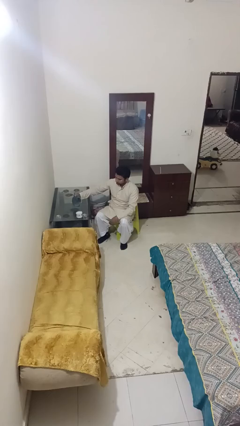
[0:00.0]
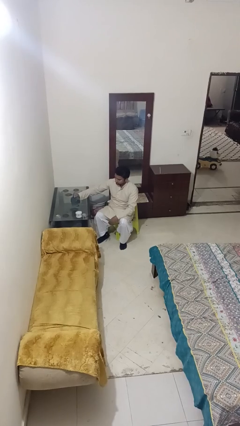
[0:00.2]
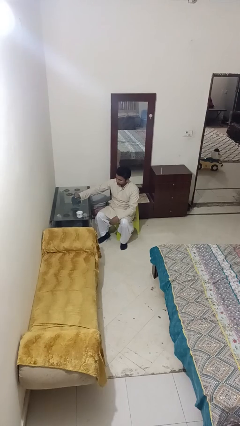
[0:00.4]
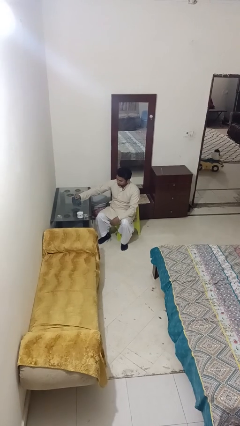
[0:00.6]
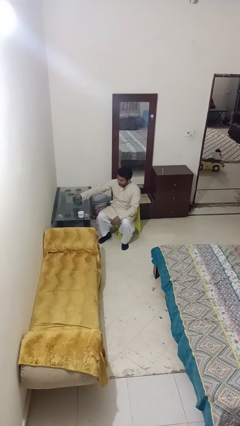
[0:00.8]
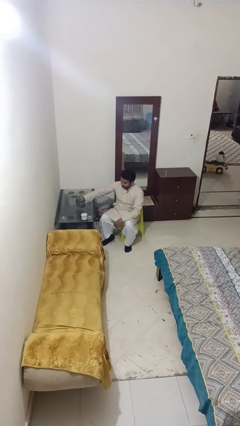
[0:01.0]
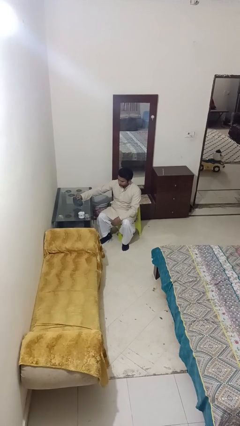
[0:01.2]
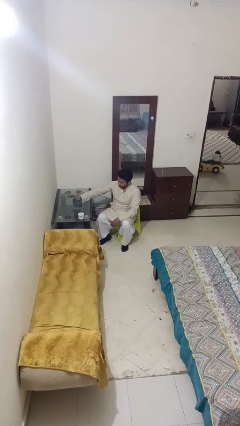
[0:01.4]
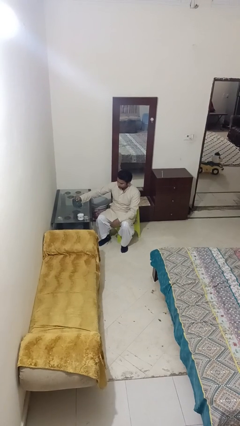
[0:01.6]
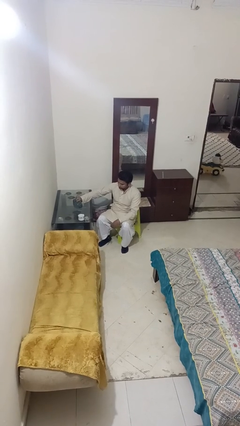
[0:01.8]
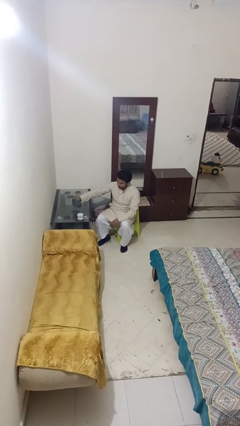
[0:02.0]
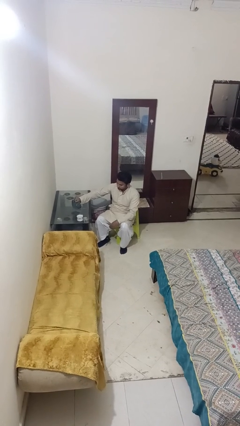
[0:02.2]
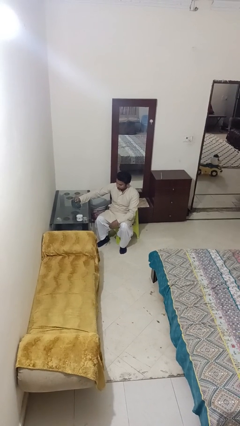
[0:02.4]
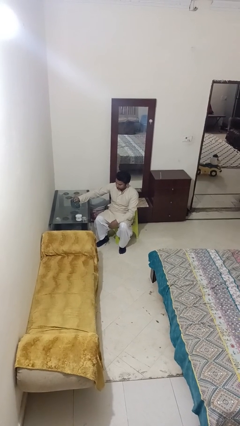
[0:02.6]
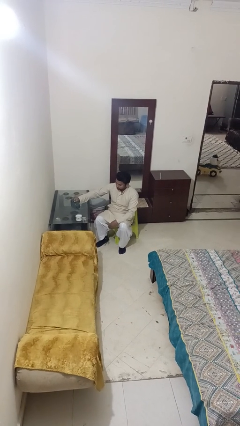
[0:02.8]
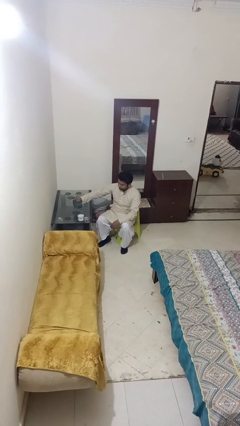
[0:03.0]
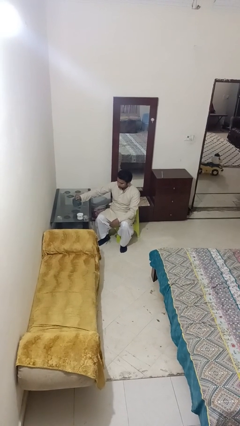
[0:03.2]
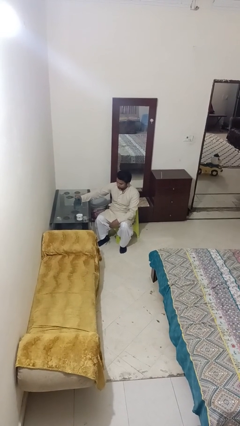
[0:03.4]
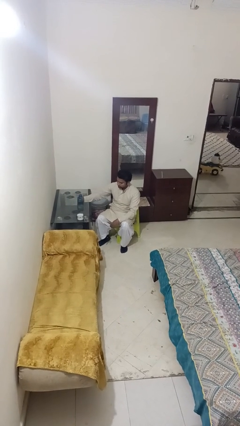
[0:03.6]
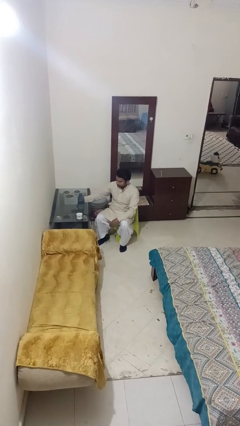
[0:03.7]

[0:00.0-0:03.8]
person pours liquid into cup

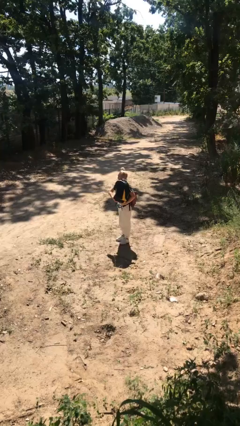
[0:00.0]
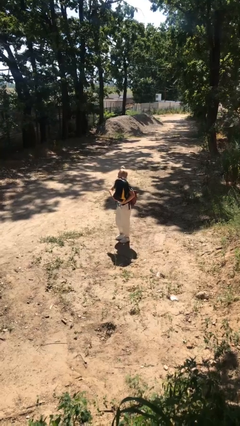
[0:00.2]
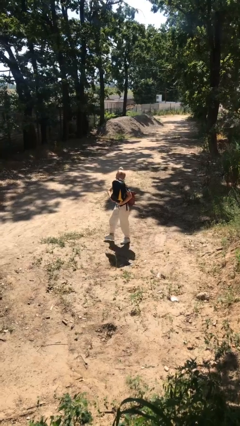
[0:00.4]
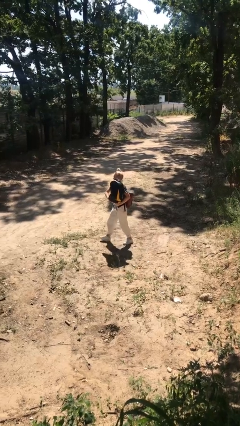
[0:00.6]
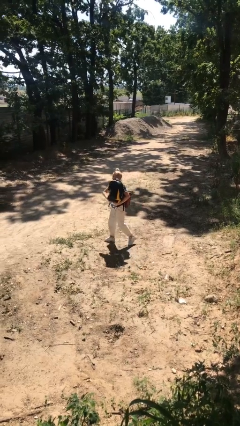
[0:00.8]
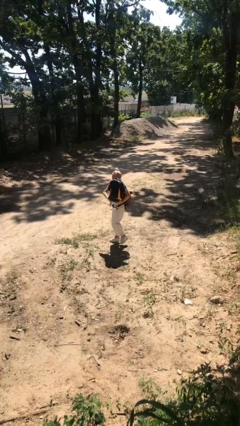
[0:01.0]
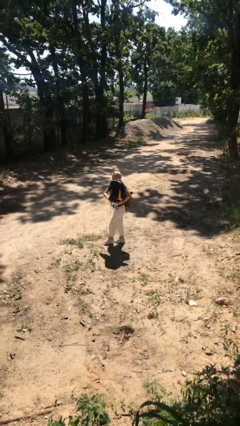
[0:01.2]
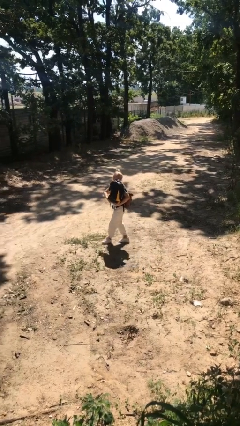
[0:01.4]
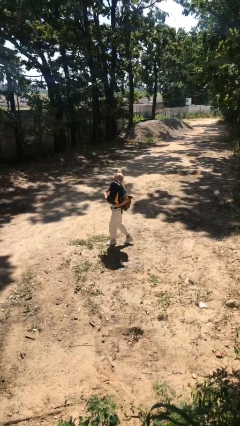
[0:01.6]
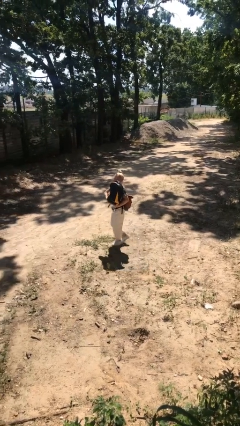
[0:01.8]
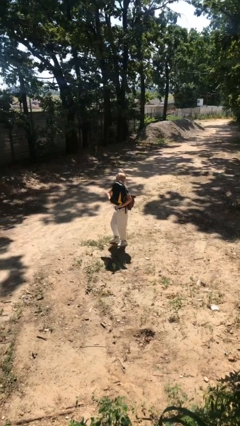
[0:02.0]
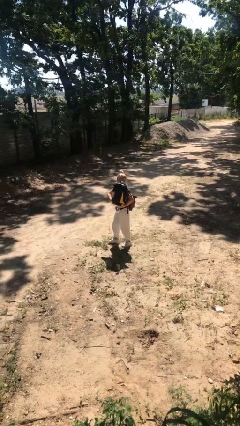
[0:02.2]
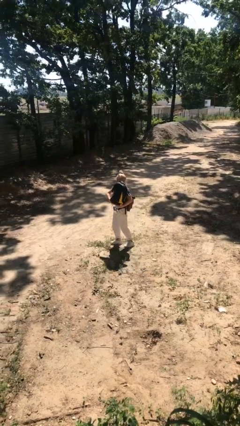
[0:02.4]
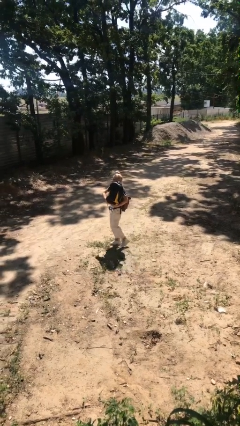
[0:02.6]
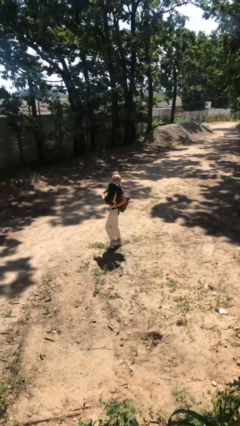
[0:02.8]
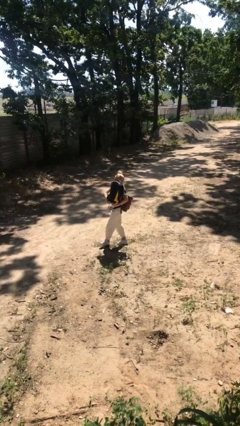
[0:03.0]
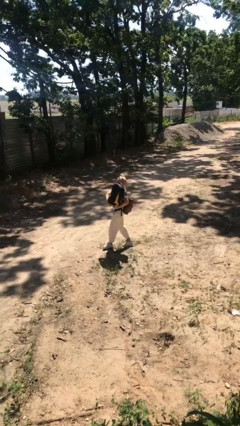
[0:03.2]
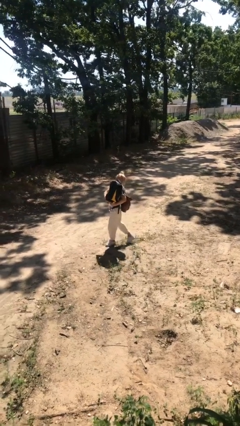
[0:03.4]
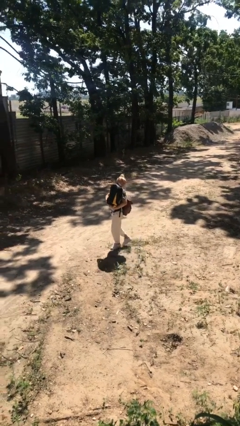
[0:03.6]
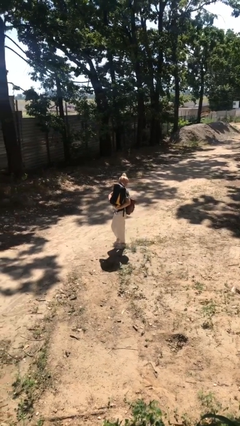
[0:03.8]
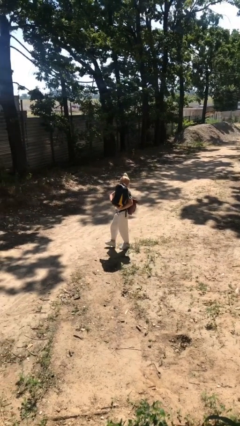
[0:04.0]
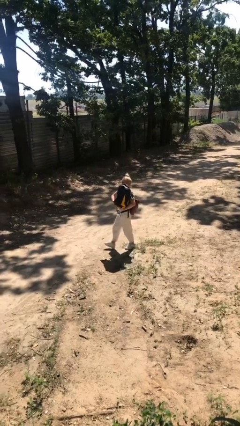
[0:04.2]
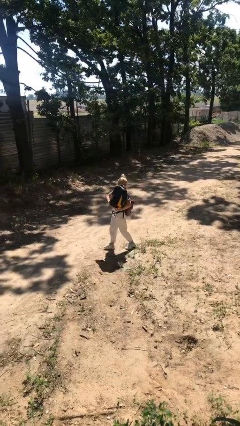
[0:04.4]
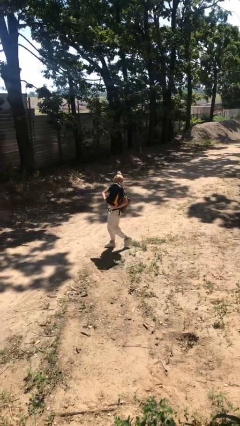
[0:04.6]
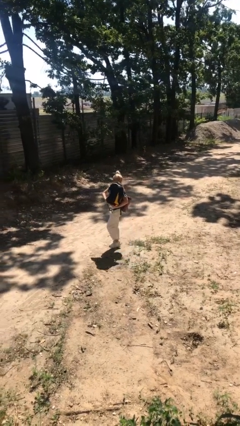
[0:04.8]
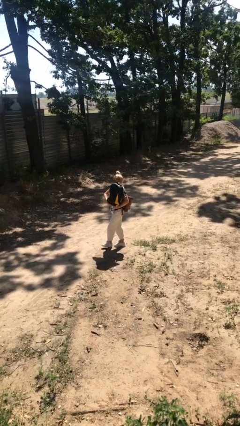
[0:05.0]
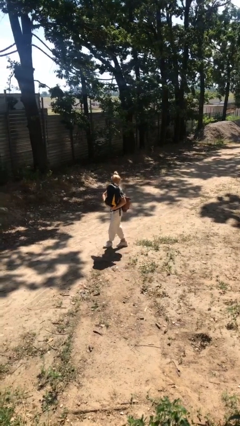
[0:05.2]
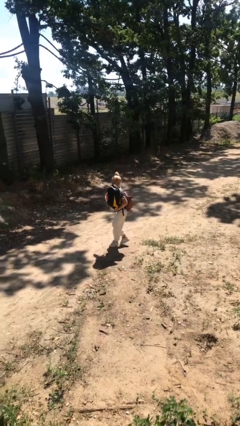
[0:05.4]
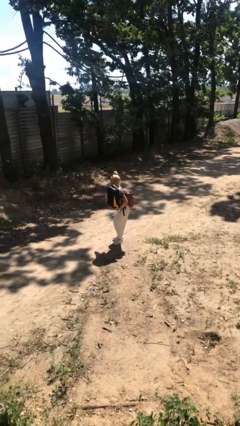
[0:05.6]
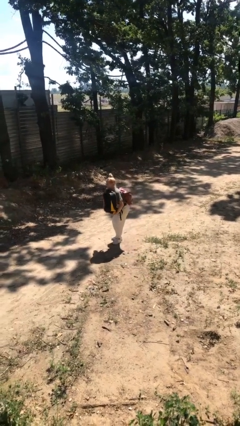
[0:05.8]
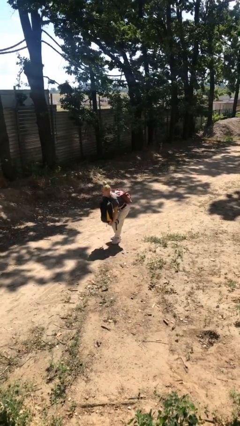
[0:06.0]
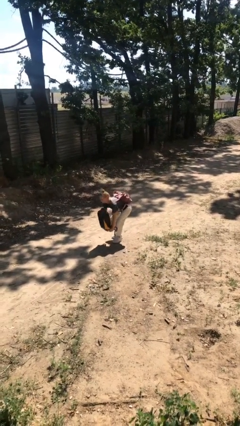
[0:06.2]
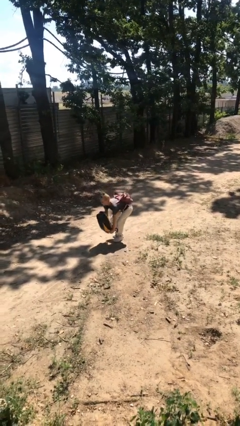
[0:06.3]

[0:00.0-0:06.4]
person carries heavy object

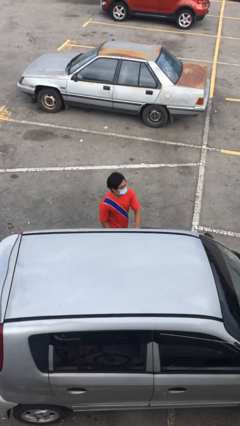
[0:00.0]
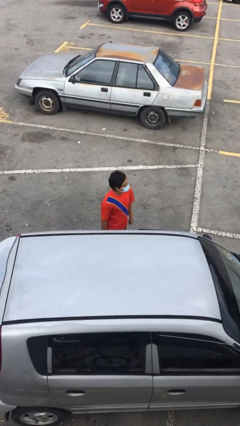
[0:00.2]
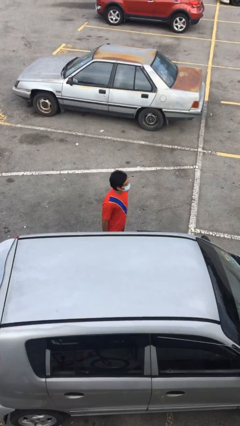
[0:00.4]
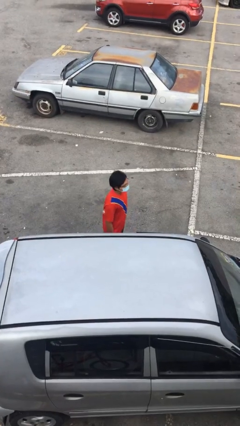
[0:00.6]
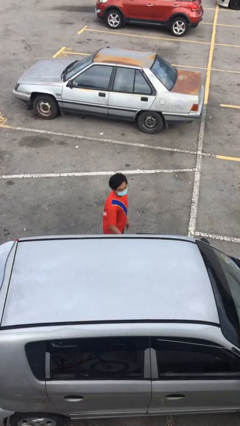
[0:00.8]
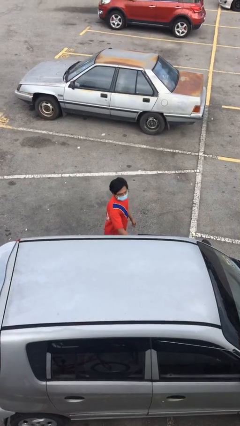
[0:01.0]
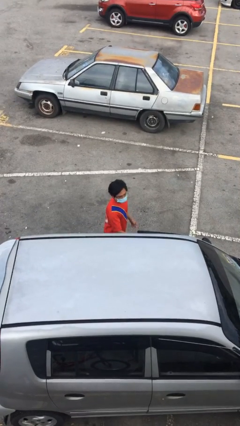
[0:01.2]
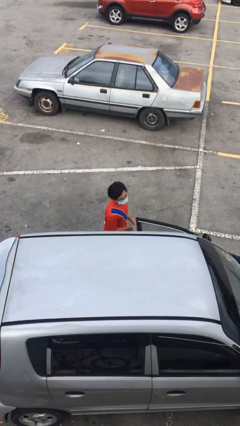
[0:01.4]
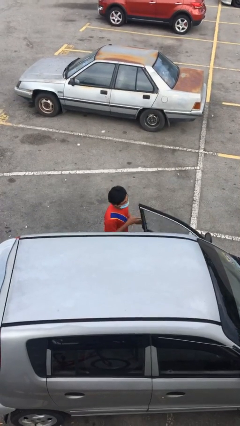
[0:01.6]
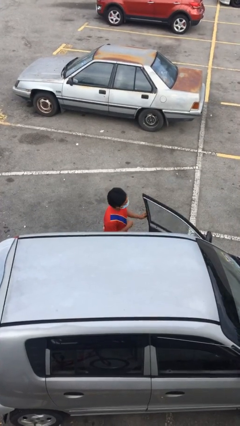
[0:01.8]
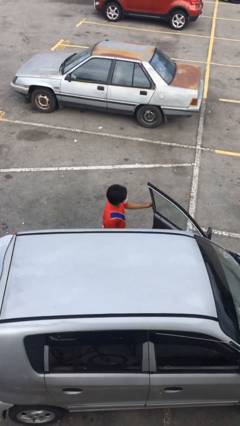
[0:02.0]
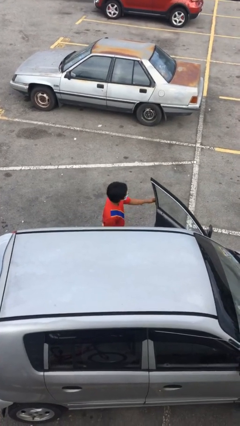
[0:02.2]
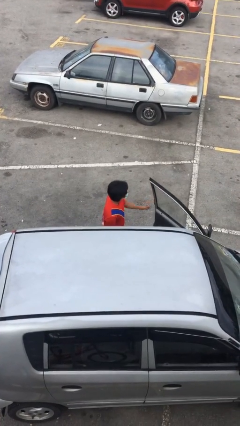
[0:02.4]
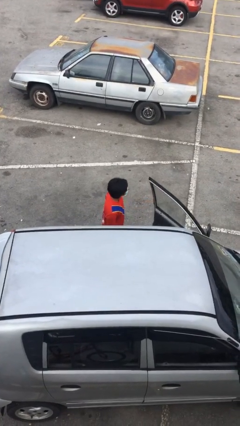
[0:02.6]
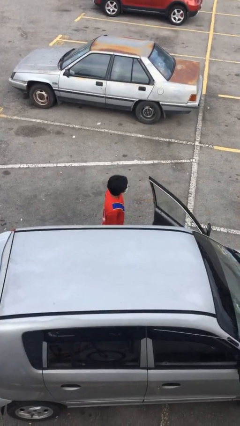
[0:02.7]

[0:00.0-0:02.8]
person opens car door

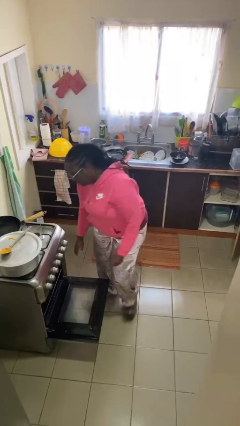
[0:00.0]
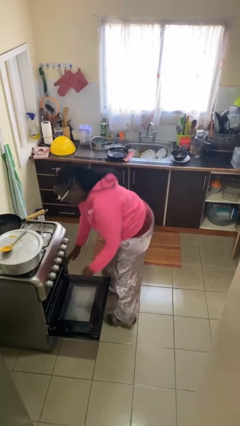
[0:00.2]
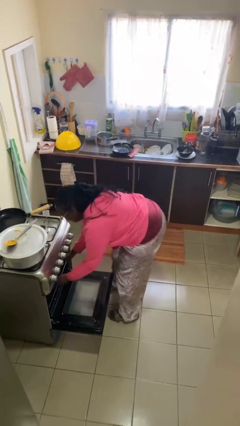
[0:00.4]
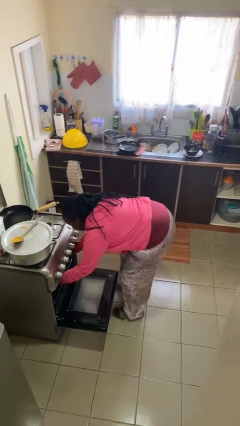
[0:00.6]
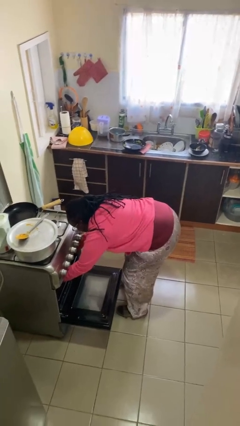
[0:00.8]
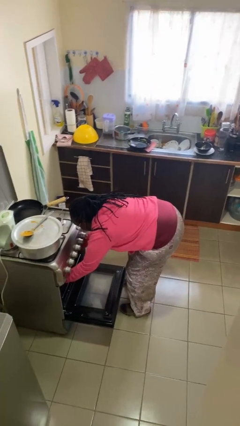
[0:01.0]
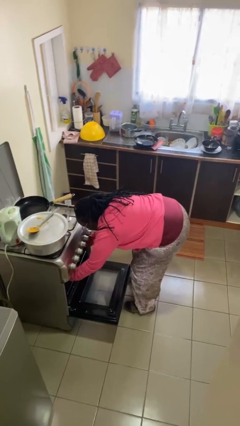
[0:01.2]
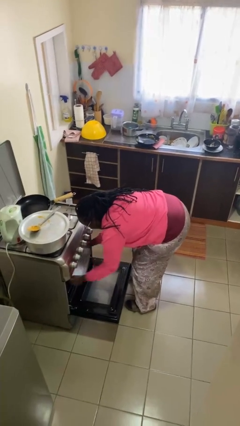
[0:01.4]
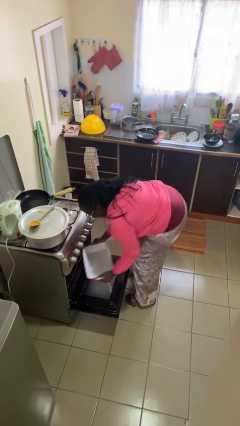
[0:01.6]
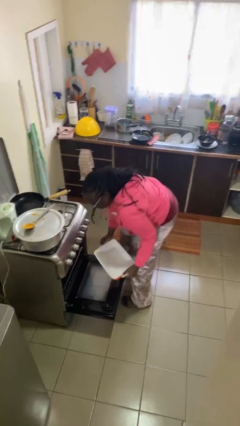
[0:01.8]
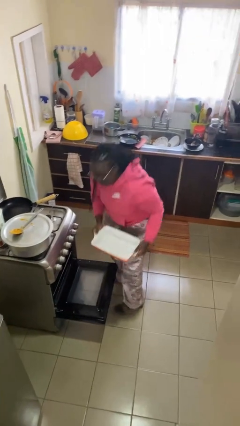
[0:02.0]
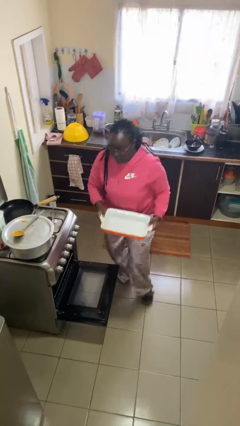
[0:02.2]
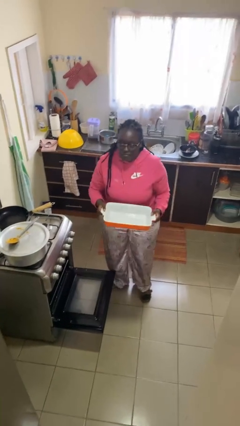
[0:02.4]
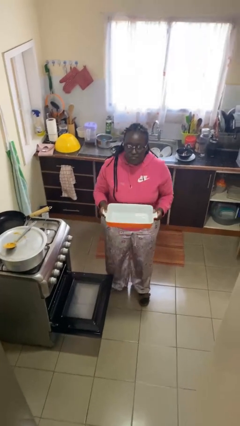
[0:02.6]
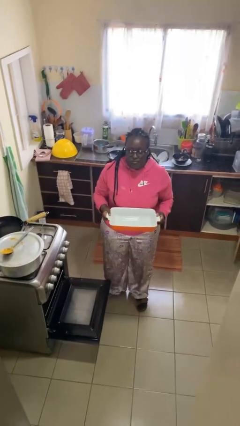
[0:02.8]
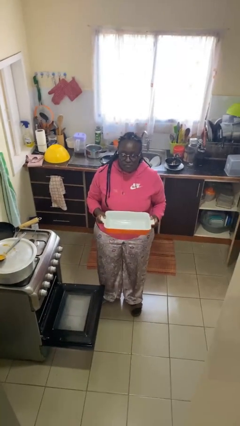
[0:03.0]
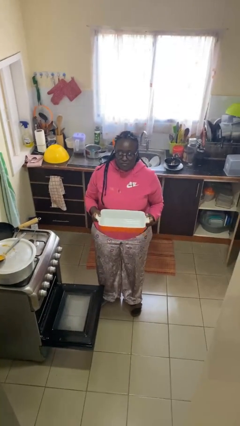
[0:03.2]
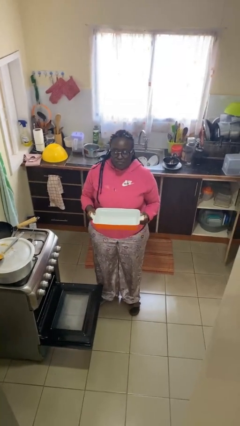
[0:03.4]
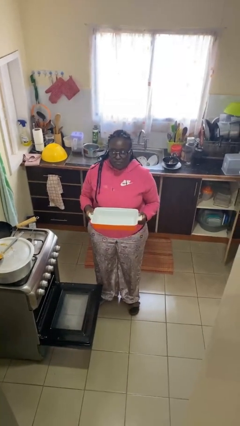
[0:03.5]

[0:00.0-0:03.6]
person takes object from oven

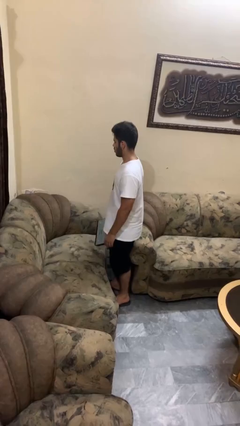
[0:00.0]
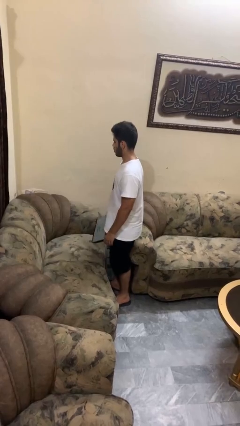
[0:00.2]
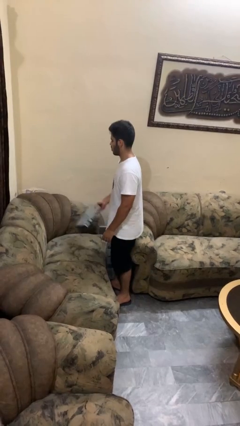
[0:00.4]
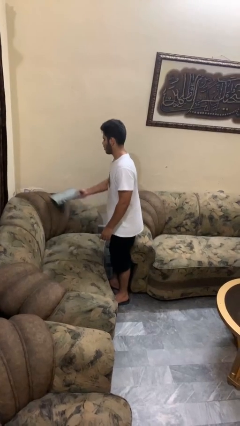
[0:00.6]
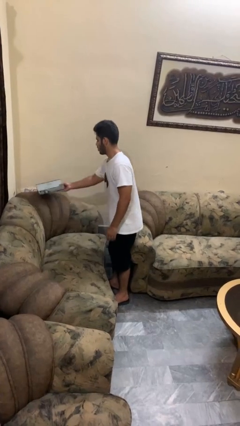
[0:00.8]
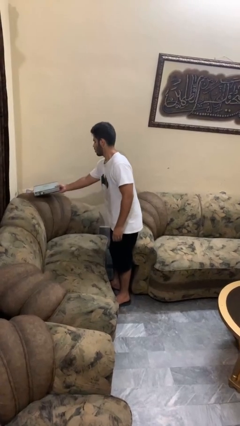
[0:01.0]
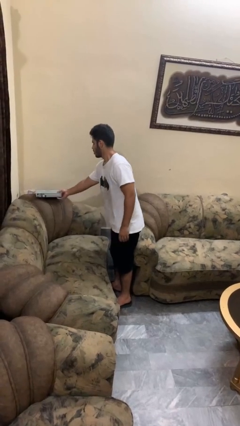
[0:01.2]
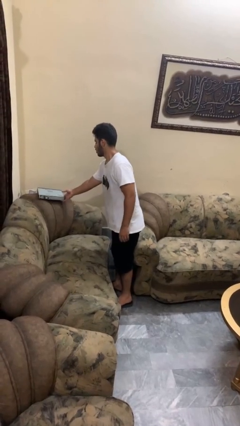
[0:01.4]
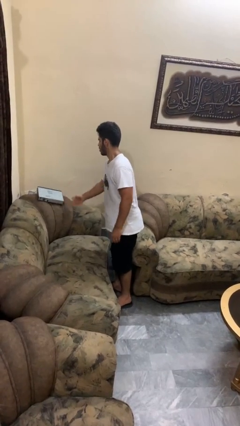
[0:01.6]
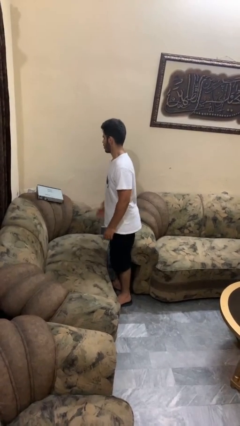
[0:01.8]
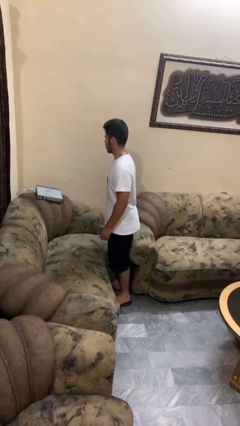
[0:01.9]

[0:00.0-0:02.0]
person puts down object on couch
